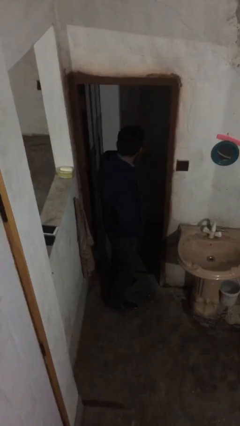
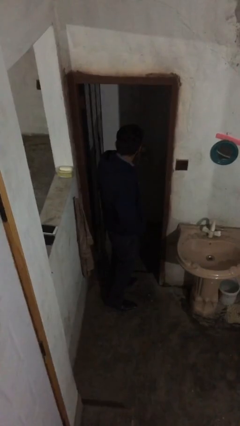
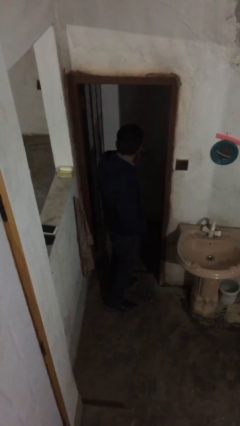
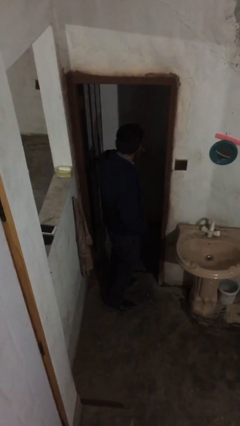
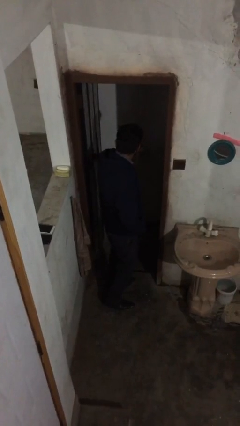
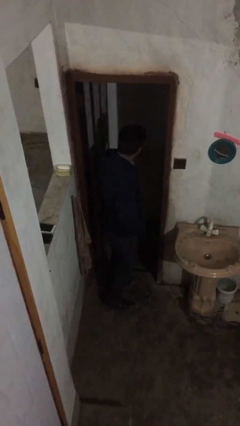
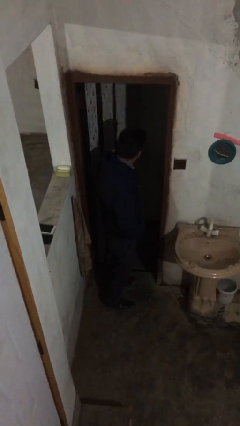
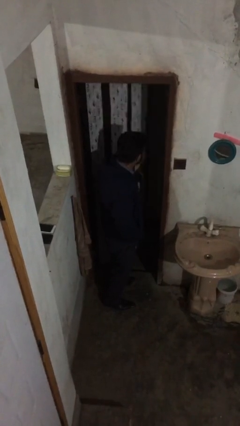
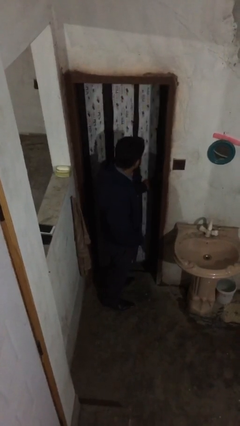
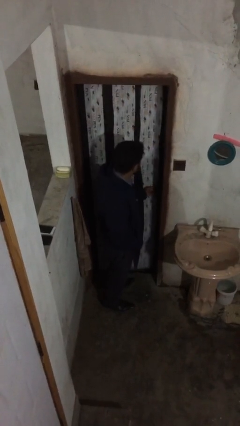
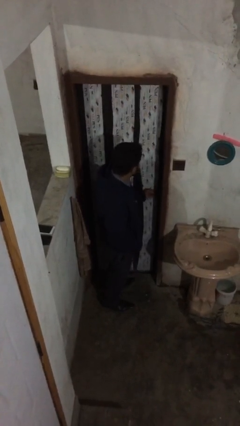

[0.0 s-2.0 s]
person closes facility door

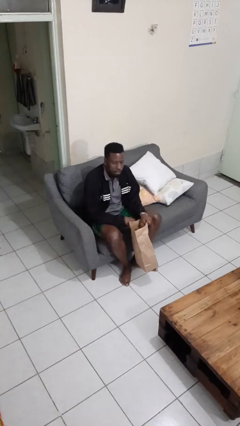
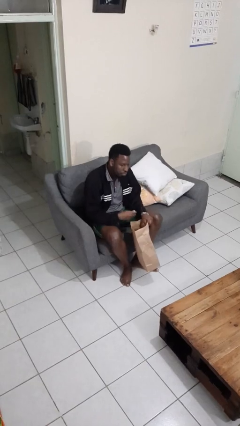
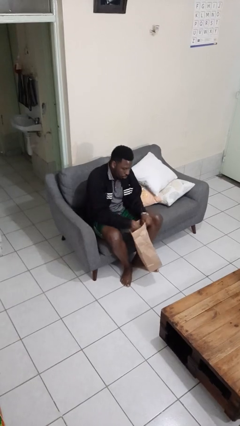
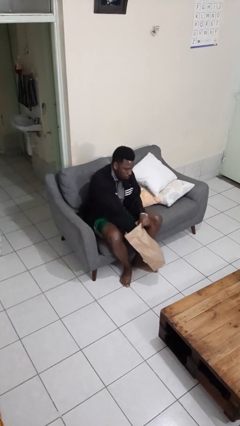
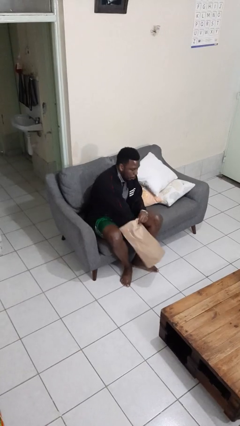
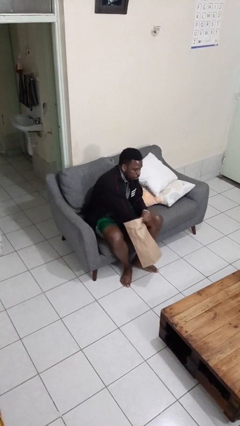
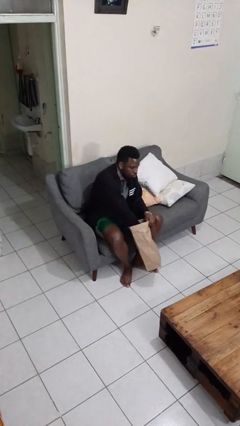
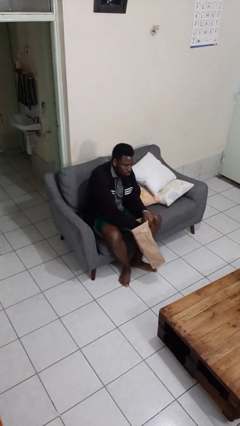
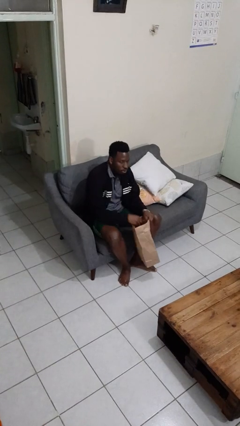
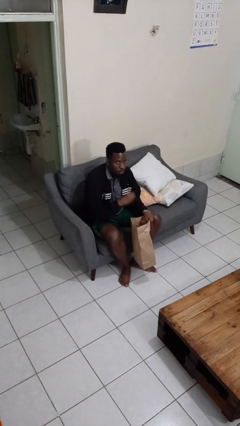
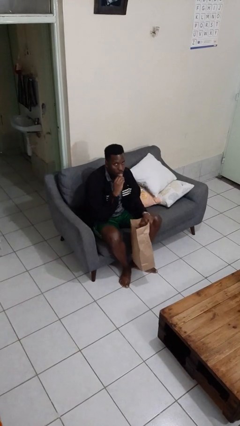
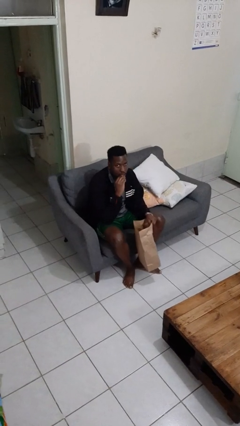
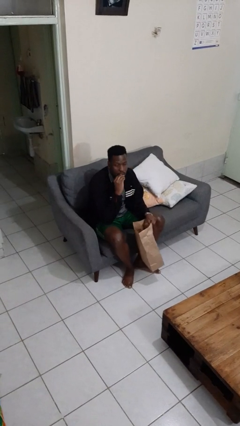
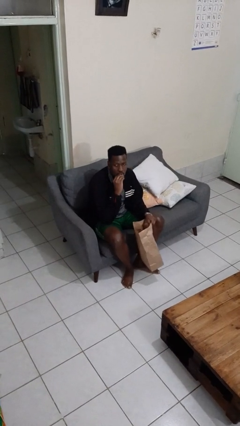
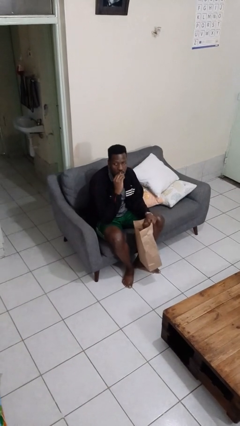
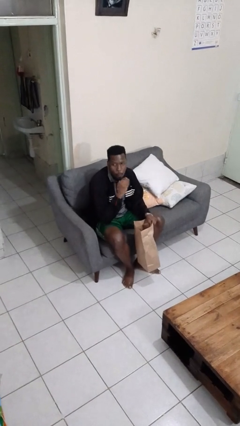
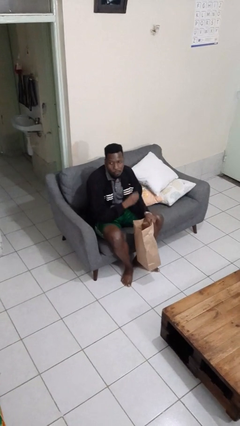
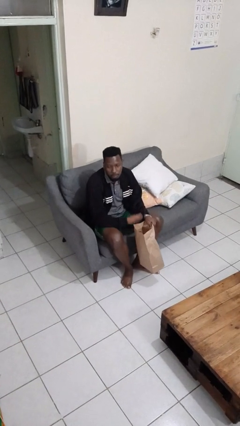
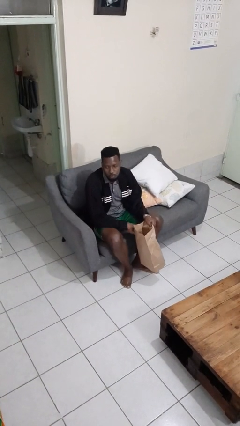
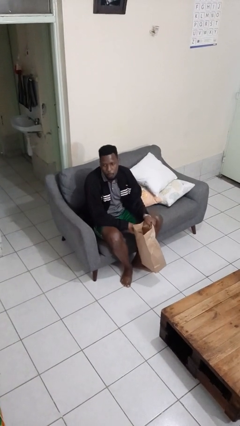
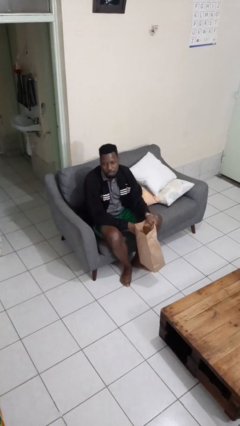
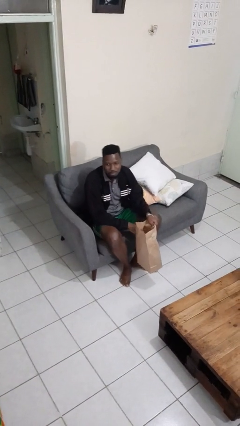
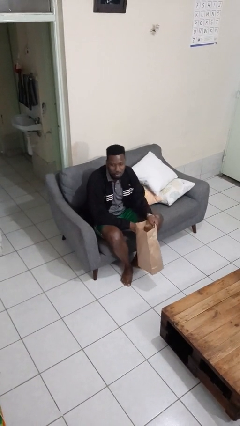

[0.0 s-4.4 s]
person eats snack from bag

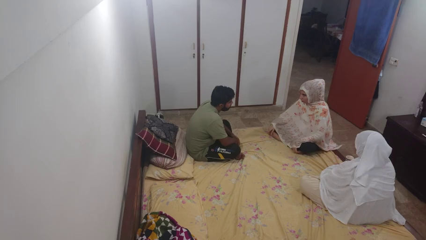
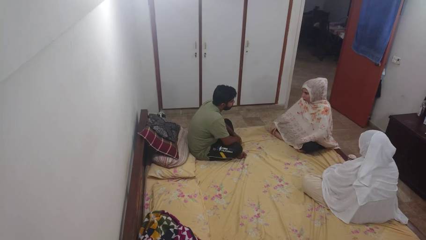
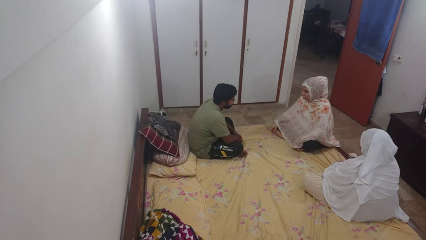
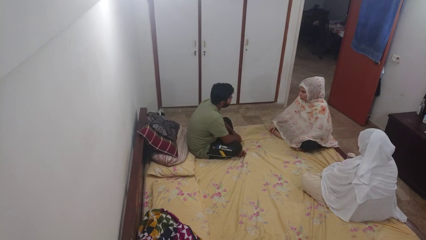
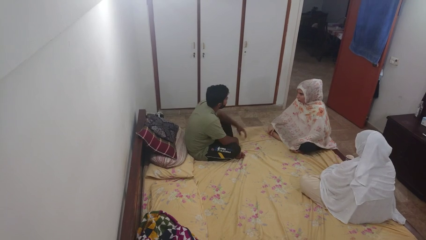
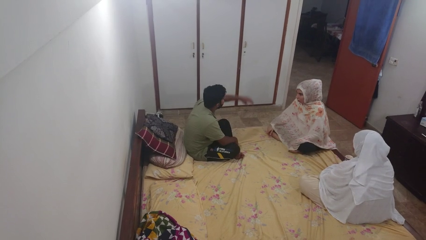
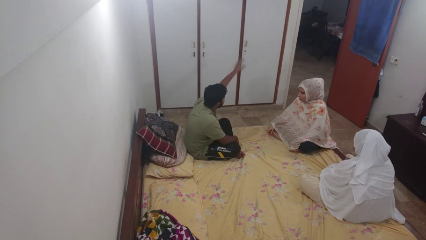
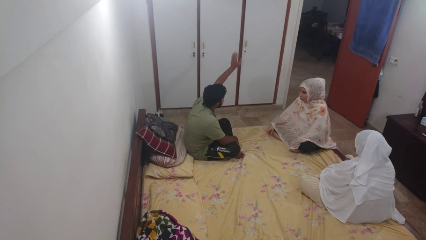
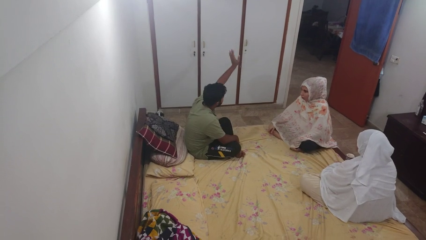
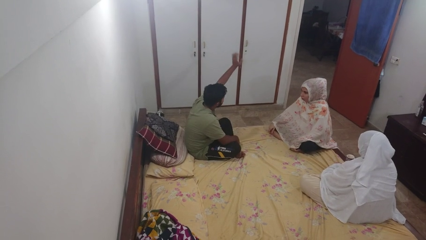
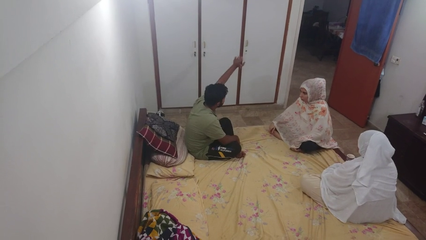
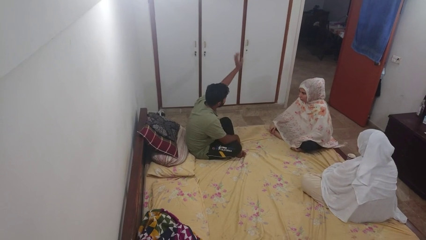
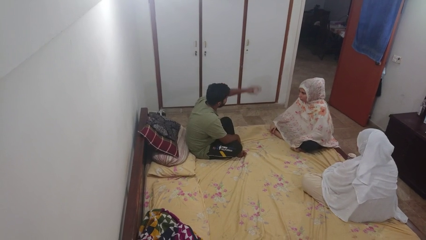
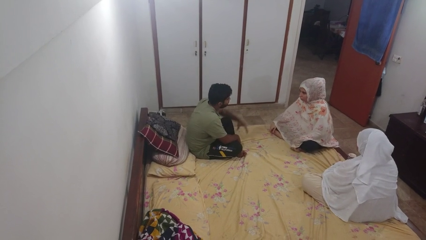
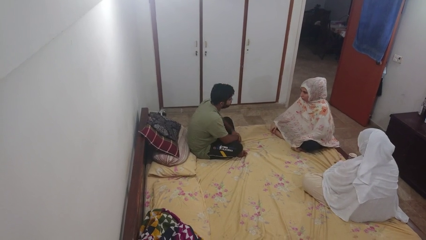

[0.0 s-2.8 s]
person waves at person

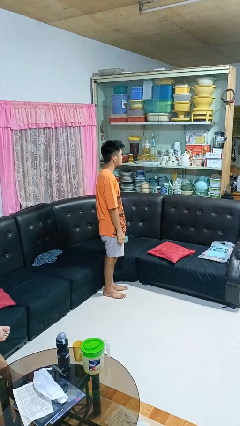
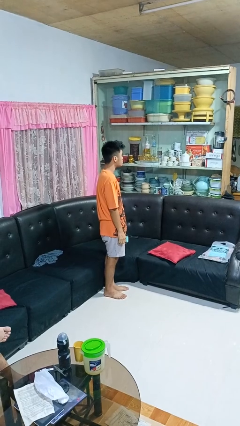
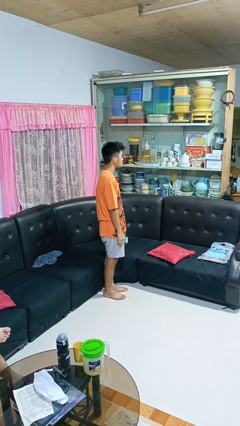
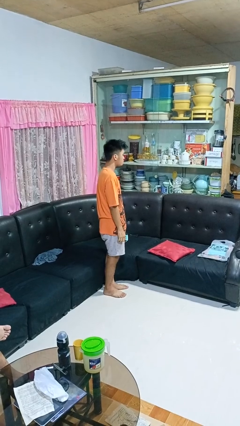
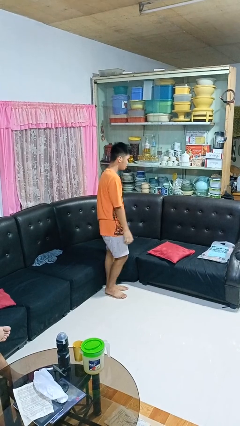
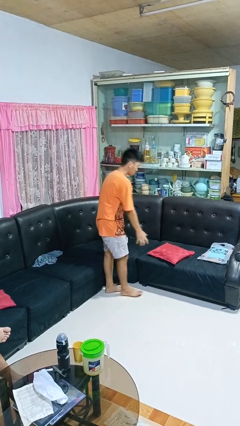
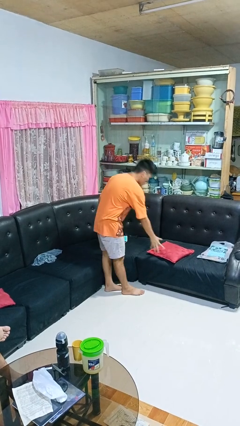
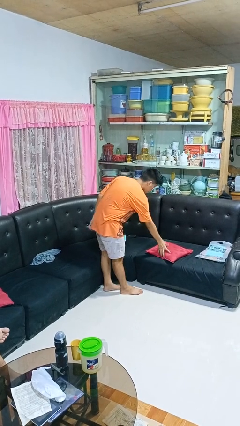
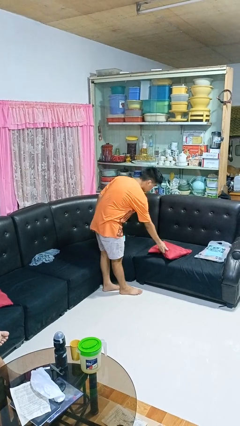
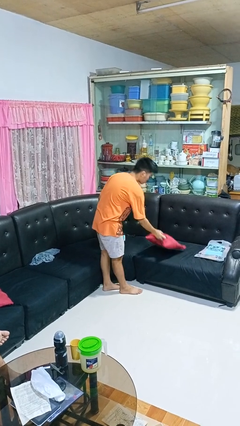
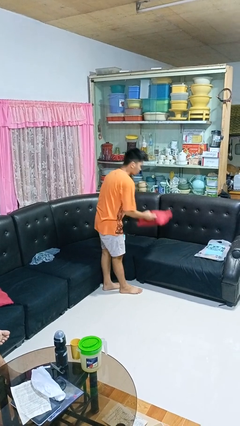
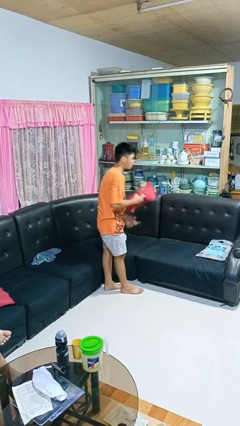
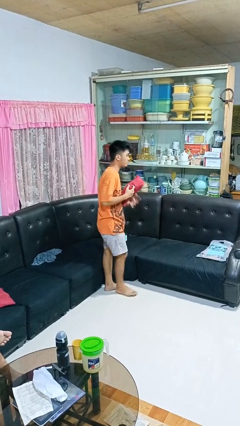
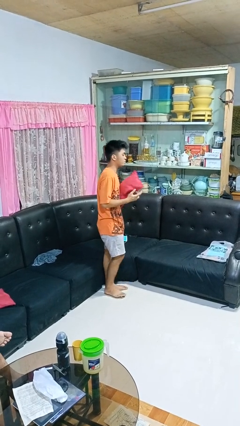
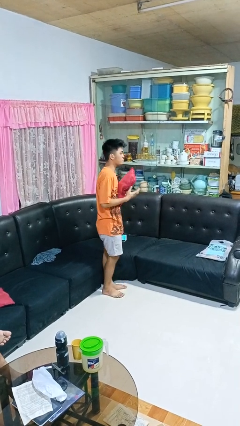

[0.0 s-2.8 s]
person picks up object from couch

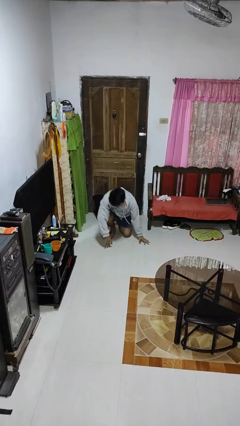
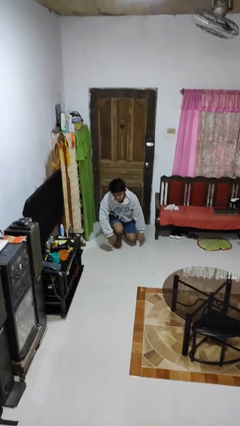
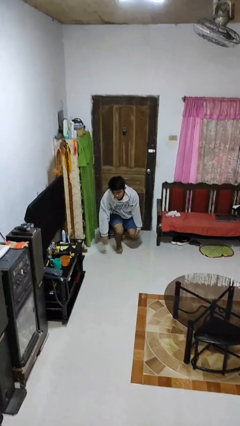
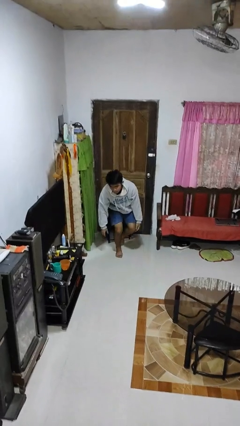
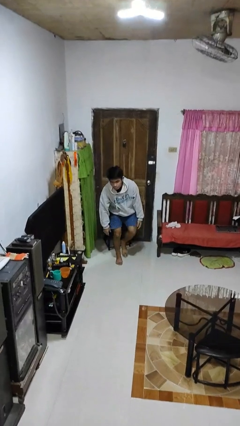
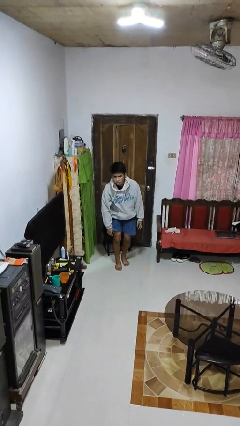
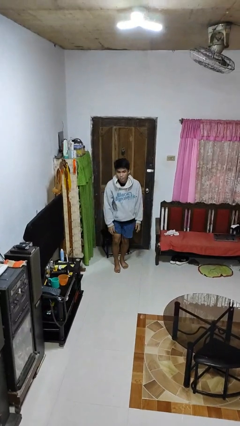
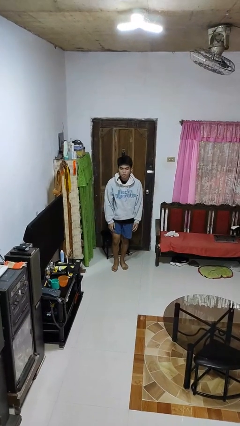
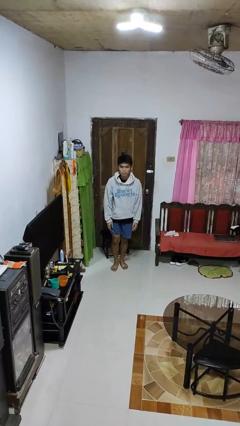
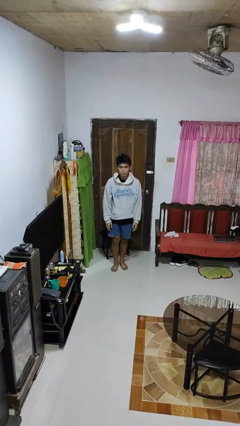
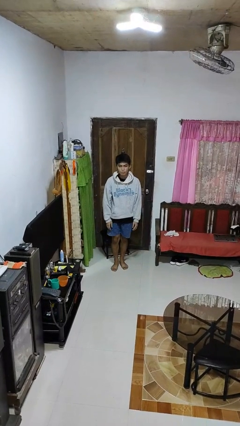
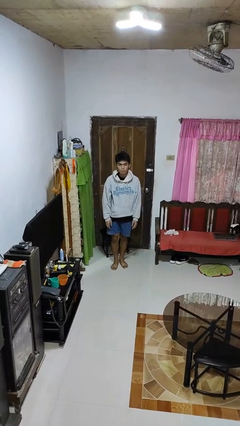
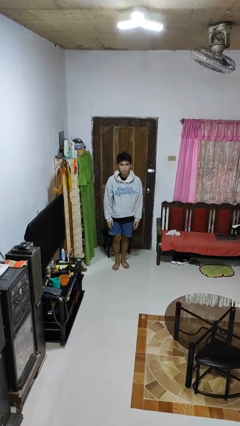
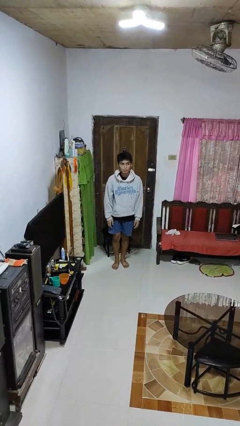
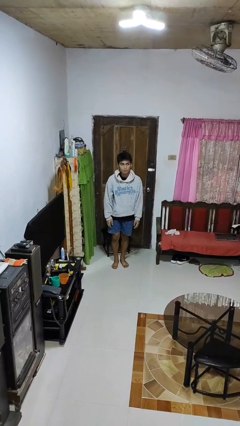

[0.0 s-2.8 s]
person stands up from floor

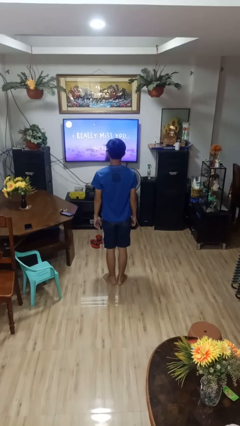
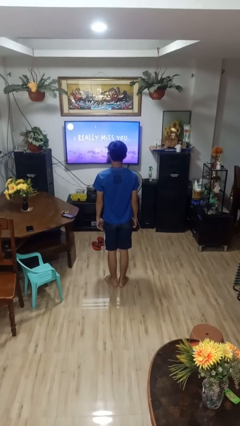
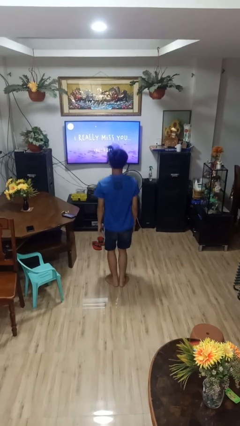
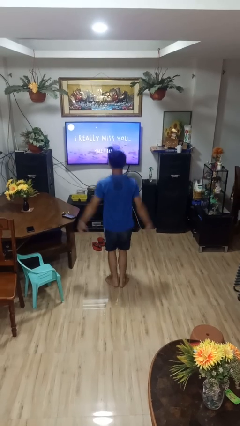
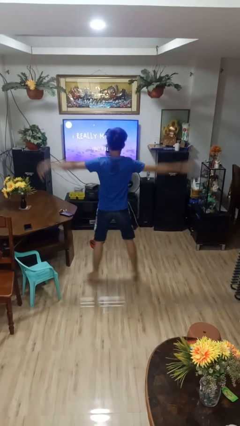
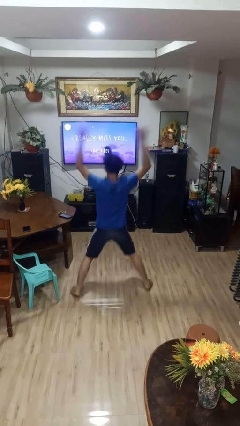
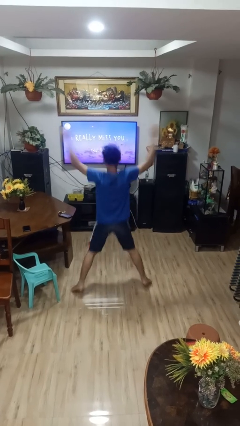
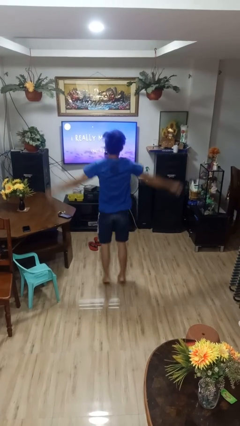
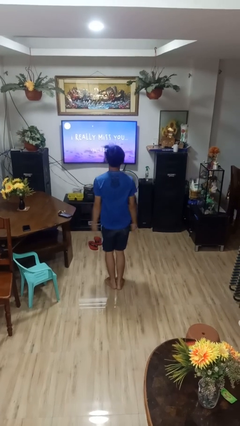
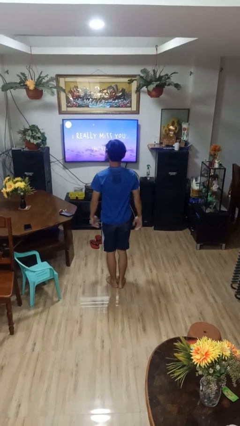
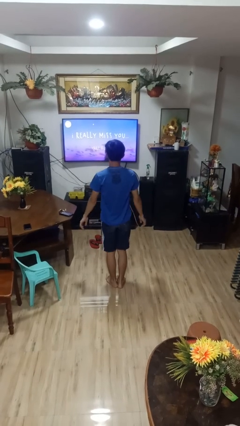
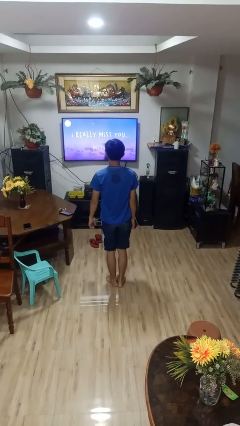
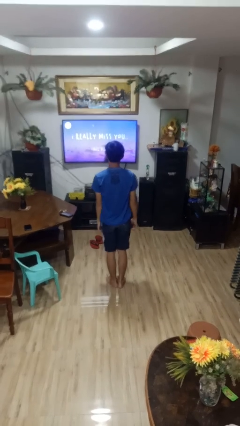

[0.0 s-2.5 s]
person exercises with jumping jacks
